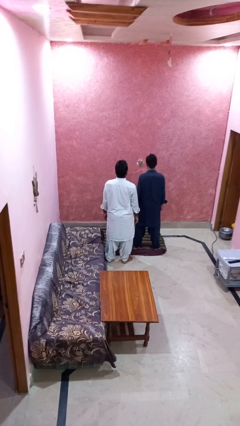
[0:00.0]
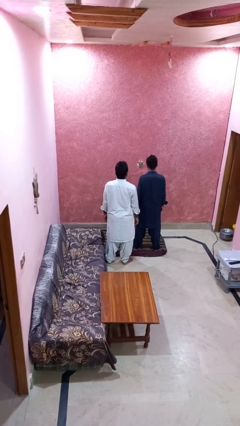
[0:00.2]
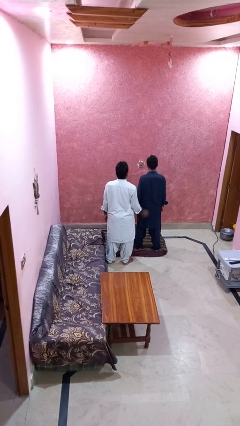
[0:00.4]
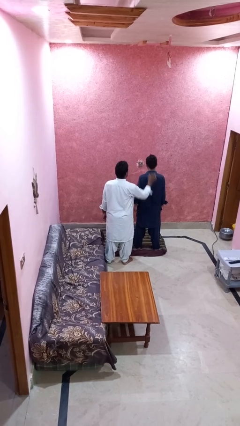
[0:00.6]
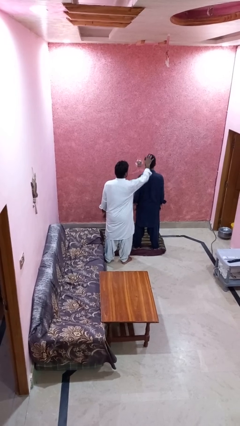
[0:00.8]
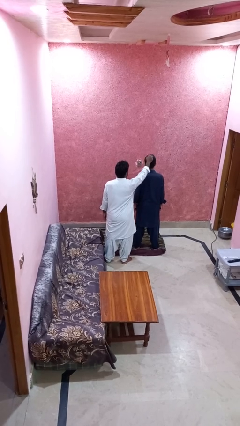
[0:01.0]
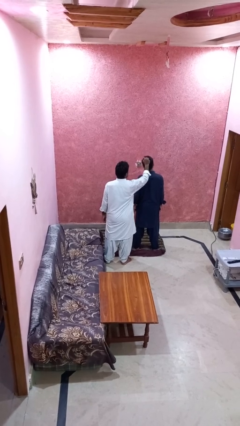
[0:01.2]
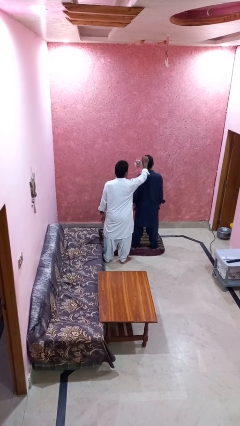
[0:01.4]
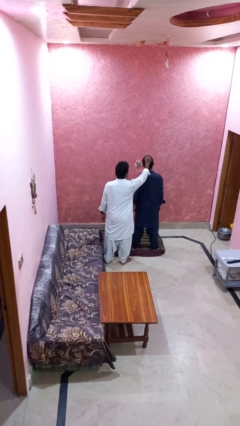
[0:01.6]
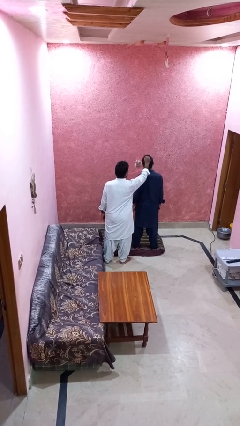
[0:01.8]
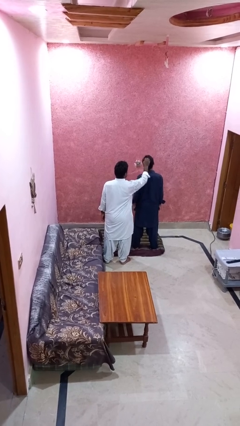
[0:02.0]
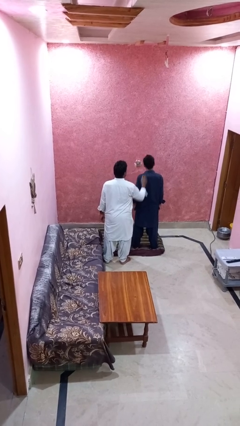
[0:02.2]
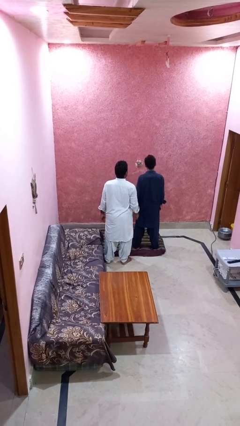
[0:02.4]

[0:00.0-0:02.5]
person grabs person by hair

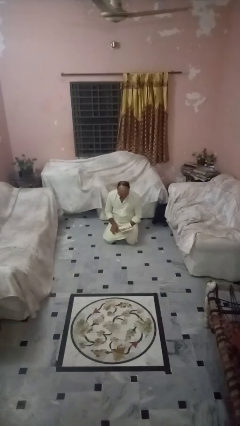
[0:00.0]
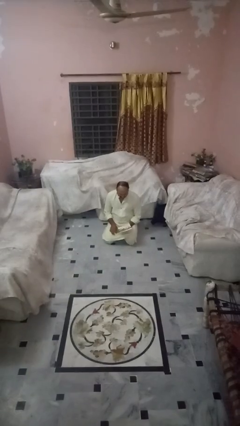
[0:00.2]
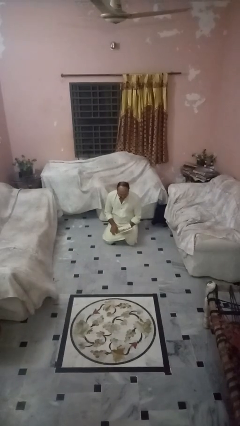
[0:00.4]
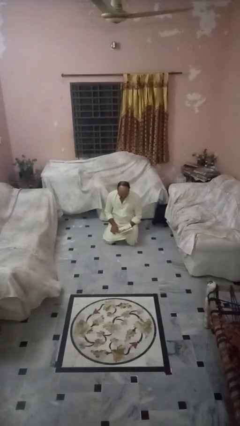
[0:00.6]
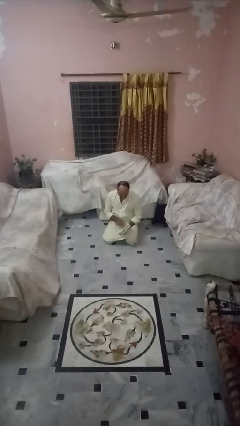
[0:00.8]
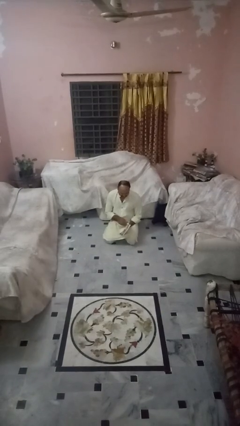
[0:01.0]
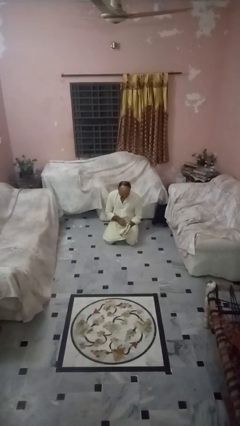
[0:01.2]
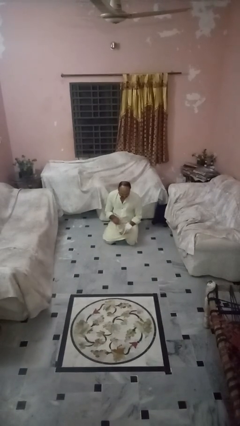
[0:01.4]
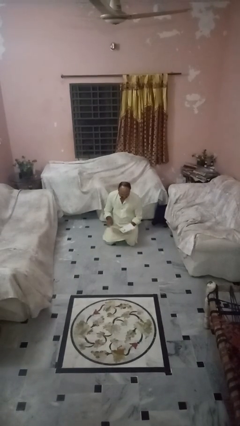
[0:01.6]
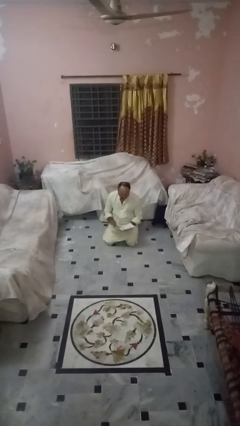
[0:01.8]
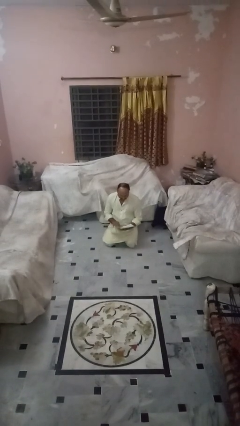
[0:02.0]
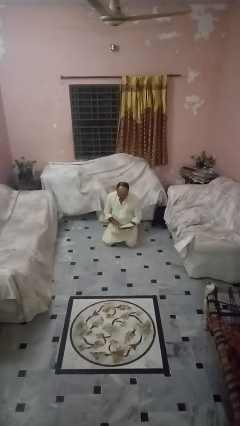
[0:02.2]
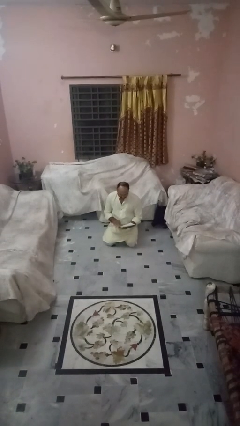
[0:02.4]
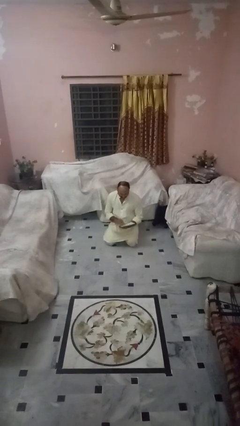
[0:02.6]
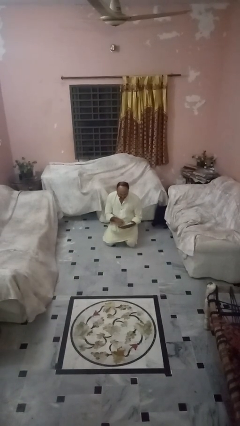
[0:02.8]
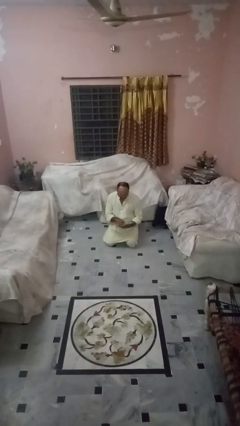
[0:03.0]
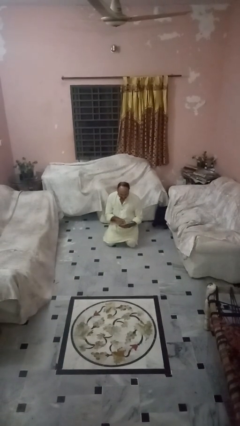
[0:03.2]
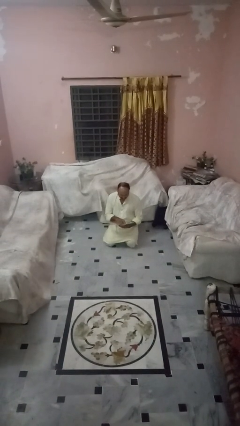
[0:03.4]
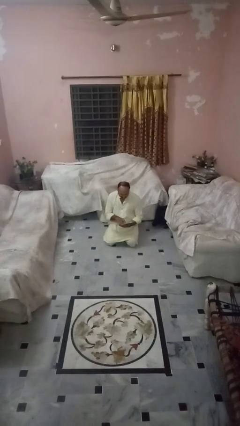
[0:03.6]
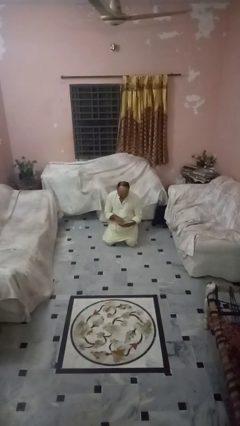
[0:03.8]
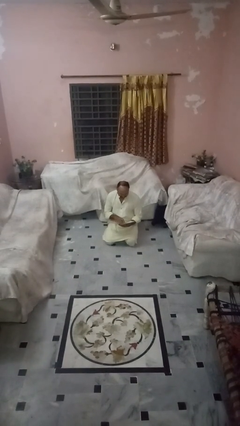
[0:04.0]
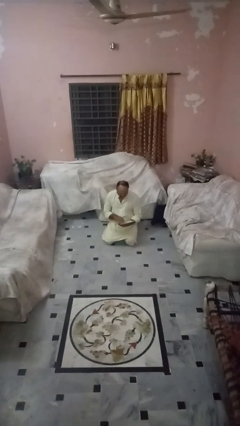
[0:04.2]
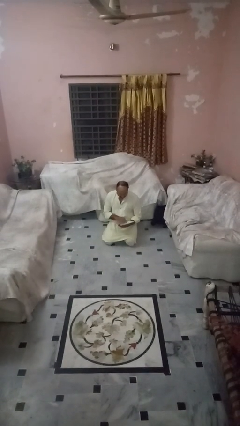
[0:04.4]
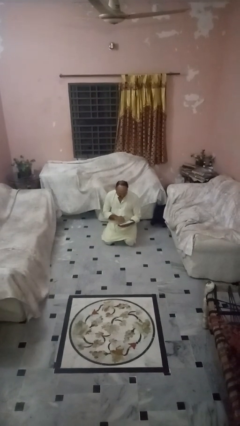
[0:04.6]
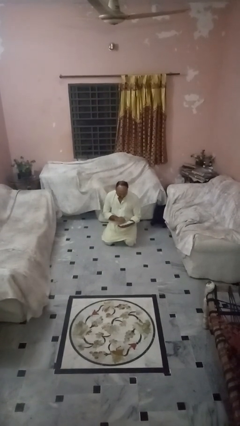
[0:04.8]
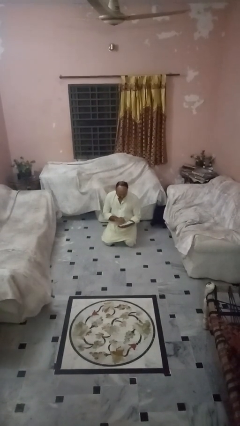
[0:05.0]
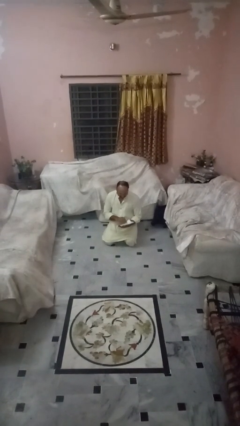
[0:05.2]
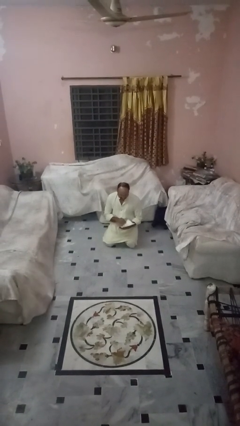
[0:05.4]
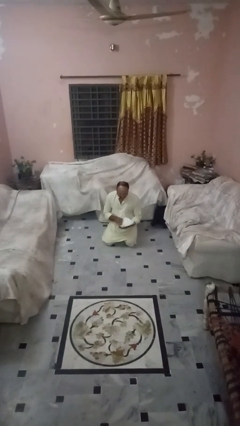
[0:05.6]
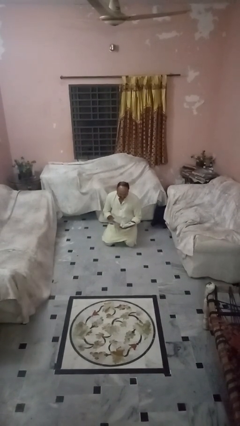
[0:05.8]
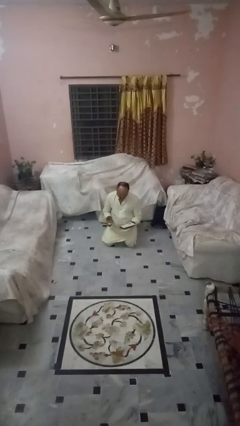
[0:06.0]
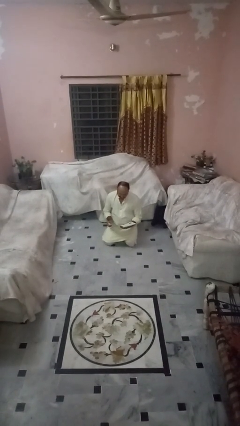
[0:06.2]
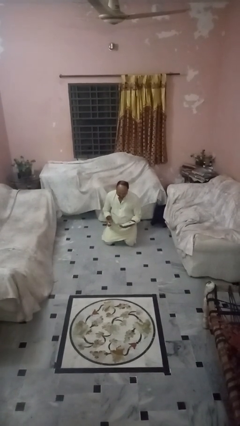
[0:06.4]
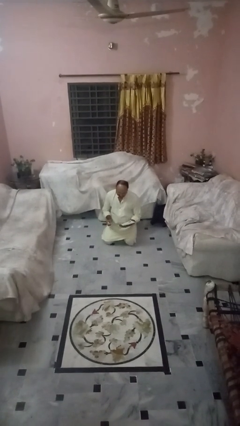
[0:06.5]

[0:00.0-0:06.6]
person reads magazine

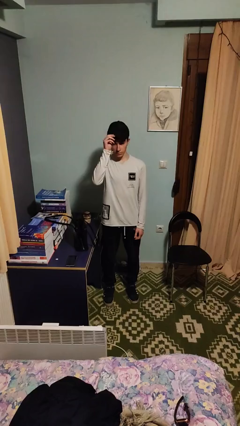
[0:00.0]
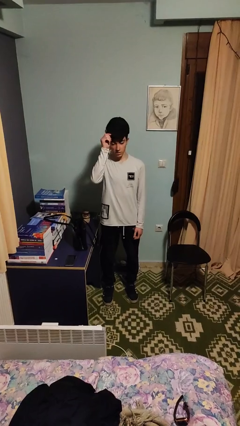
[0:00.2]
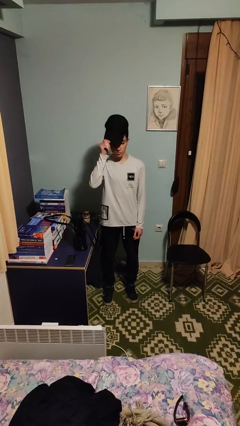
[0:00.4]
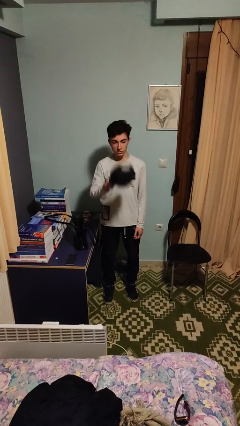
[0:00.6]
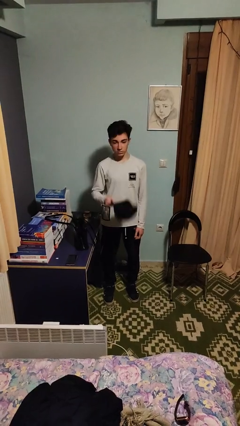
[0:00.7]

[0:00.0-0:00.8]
person takes off hat

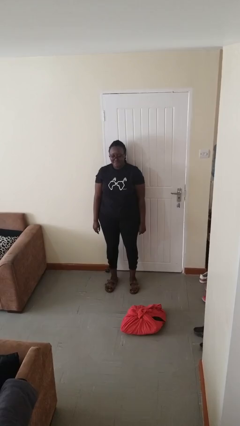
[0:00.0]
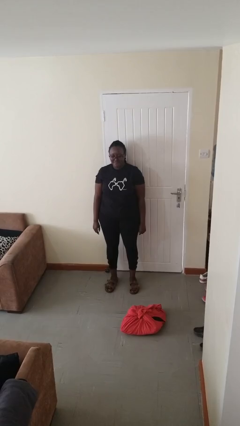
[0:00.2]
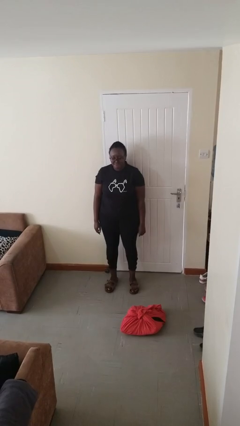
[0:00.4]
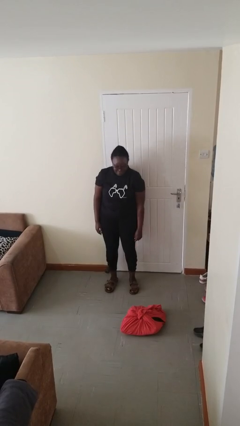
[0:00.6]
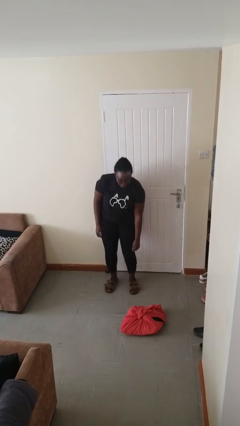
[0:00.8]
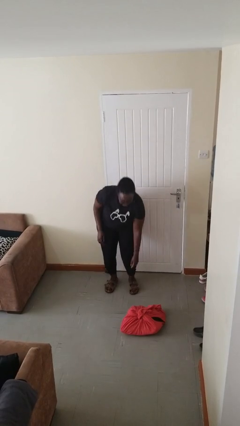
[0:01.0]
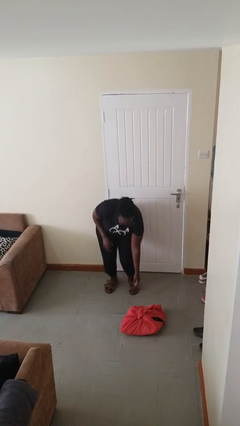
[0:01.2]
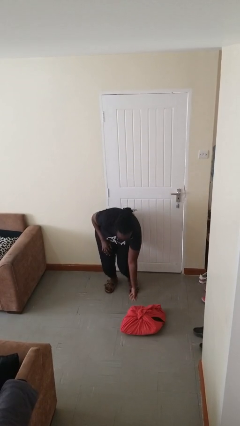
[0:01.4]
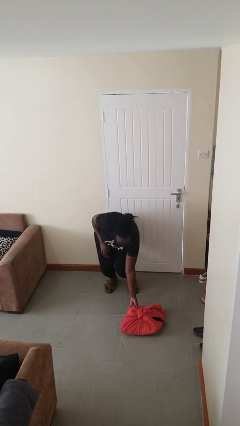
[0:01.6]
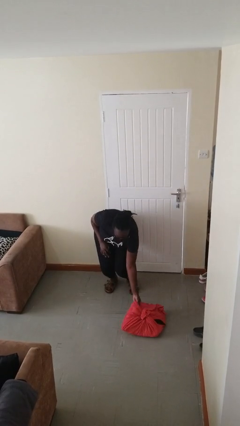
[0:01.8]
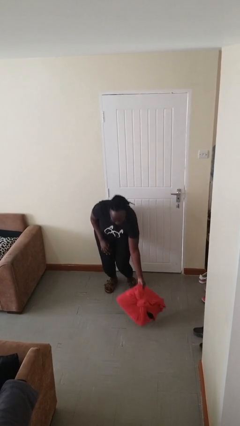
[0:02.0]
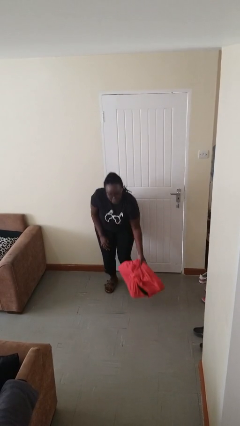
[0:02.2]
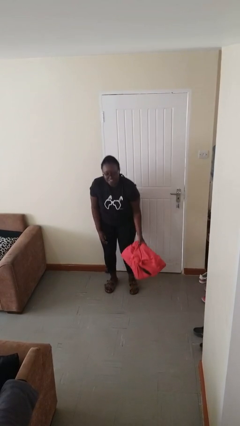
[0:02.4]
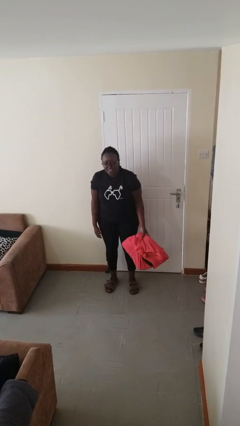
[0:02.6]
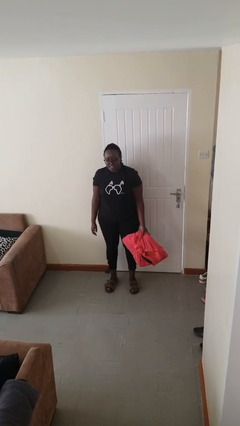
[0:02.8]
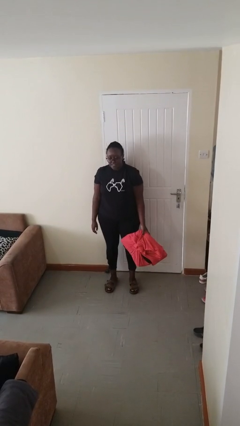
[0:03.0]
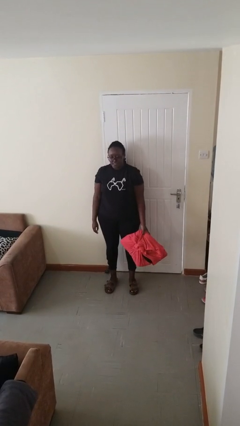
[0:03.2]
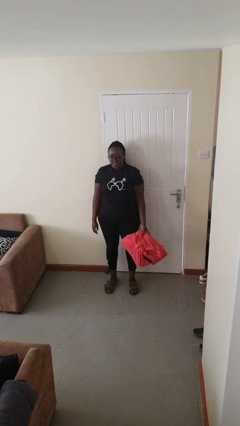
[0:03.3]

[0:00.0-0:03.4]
person picks up object from floor

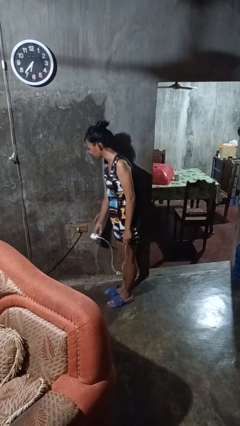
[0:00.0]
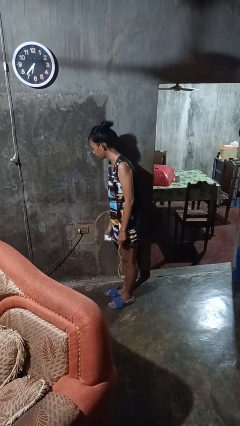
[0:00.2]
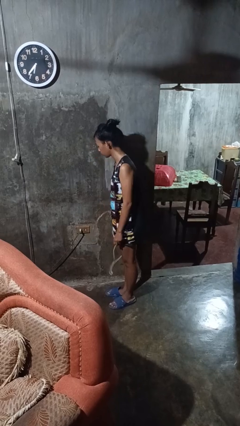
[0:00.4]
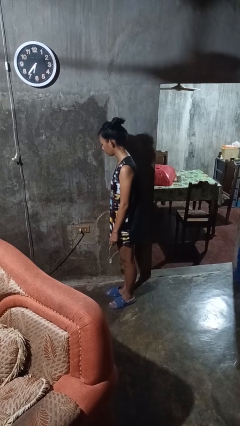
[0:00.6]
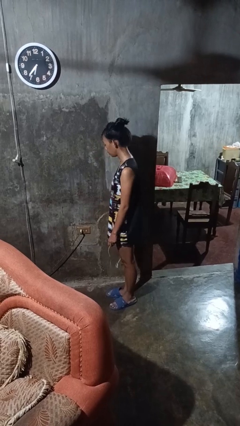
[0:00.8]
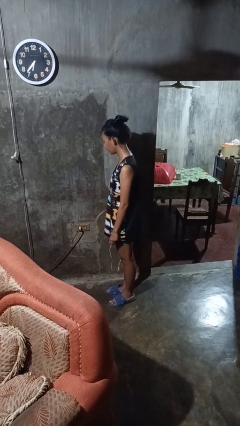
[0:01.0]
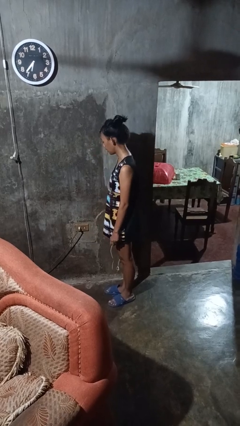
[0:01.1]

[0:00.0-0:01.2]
person unplugs from electrical socket

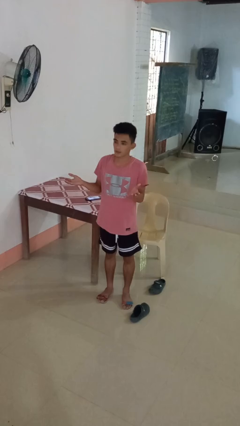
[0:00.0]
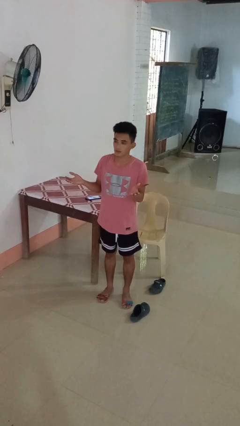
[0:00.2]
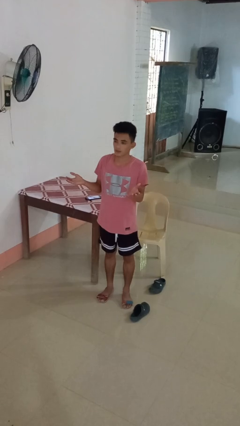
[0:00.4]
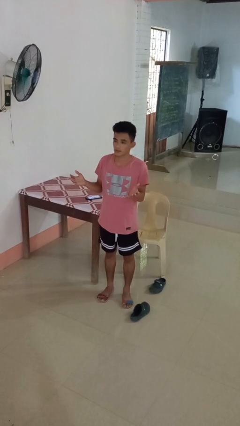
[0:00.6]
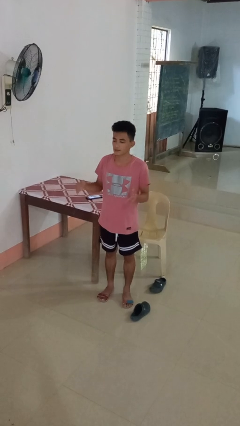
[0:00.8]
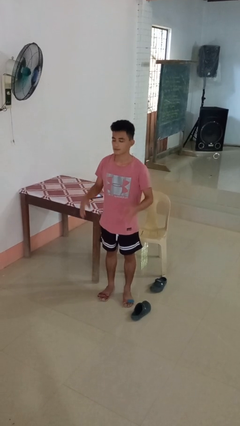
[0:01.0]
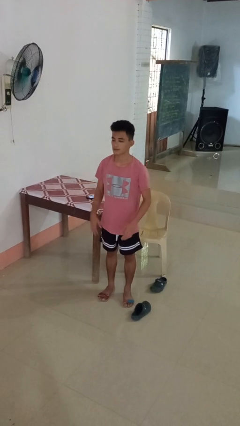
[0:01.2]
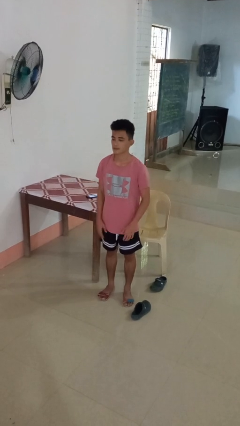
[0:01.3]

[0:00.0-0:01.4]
person shrugs

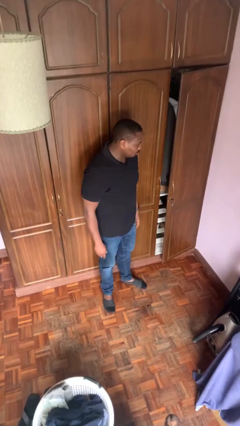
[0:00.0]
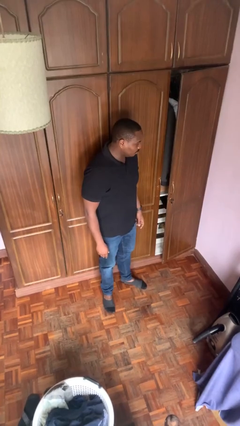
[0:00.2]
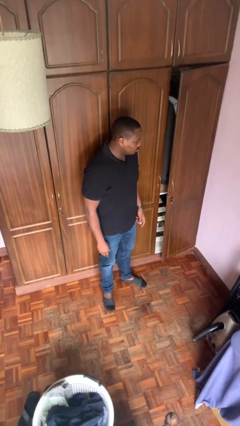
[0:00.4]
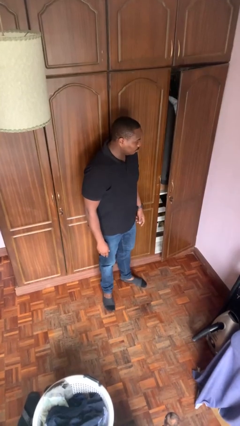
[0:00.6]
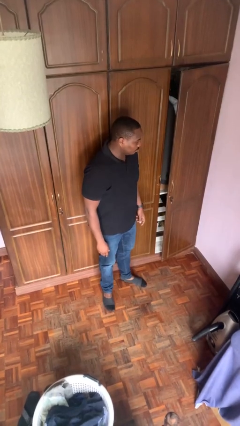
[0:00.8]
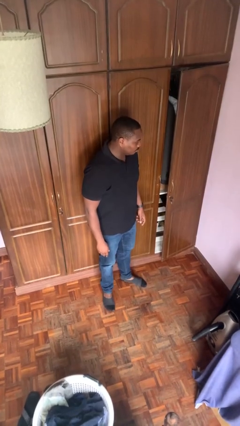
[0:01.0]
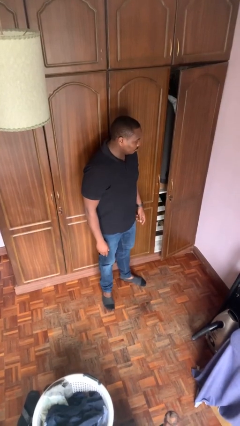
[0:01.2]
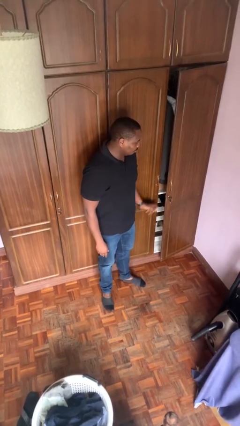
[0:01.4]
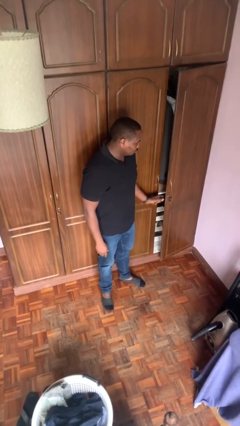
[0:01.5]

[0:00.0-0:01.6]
person closes closet door
